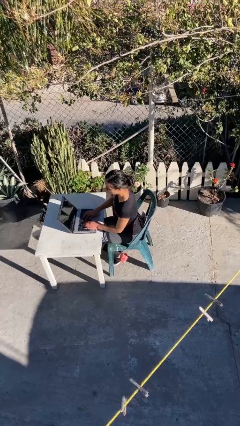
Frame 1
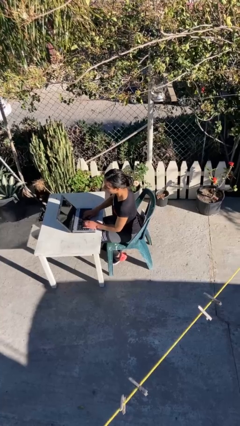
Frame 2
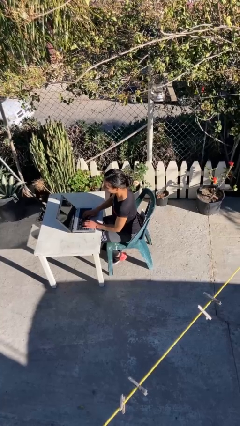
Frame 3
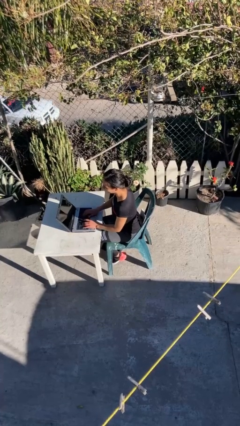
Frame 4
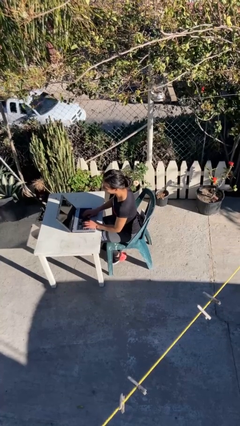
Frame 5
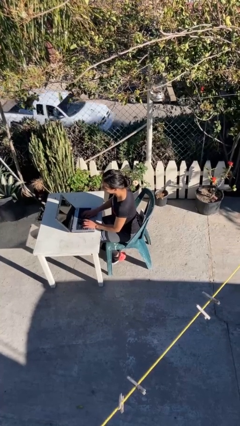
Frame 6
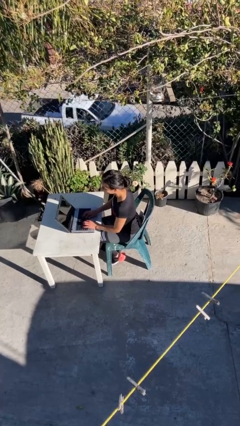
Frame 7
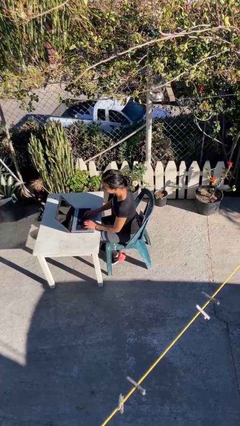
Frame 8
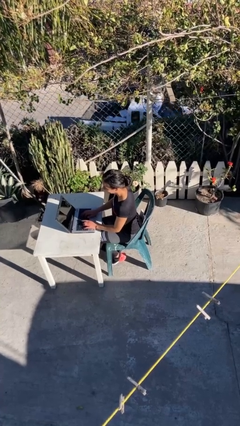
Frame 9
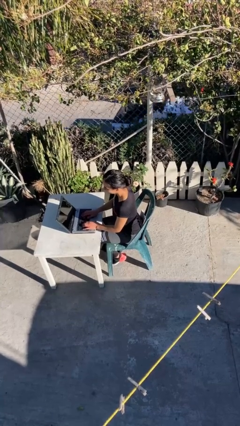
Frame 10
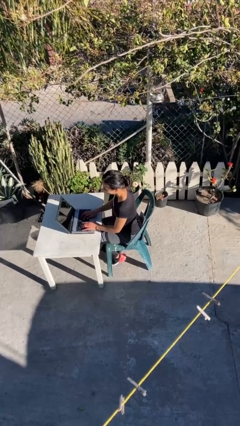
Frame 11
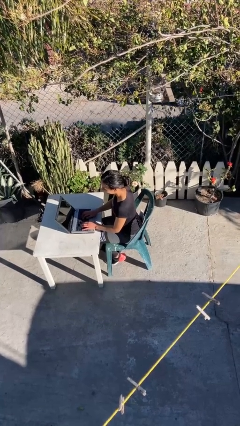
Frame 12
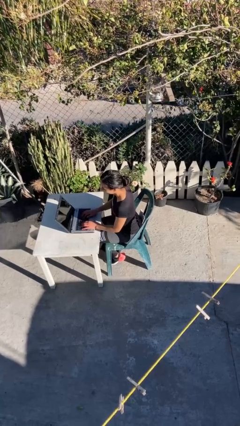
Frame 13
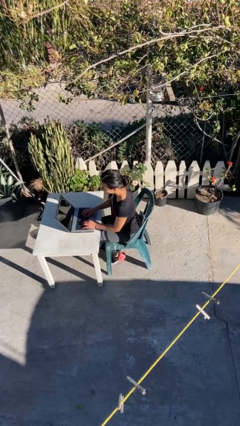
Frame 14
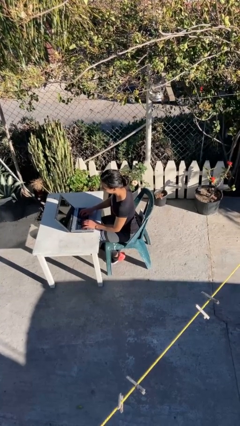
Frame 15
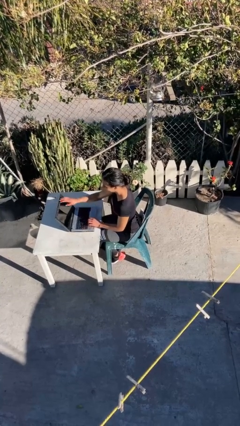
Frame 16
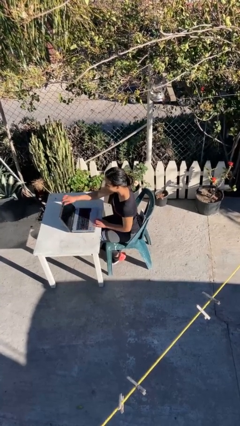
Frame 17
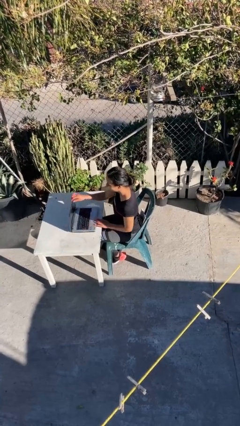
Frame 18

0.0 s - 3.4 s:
person interacts with laptop

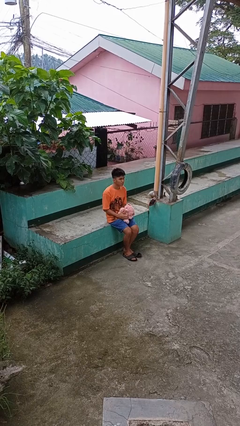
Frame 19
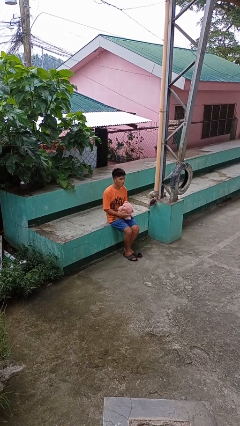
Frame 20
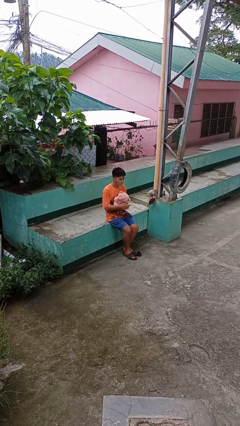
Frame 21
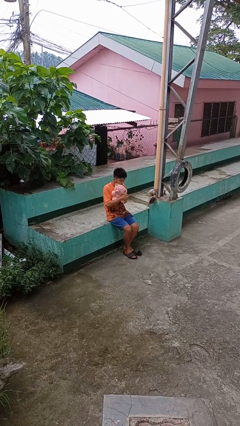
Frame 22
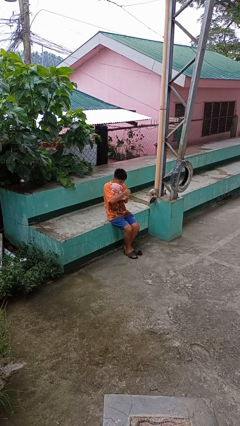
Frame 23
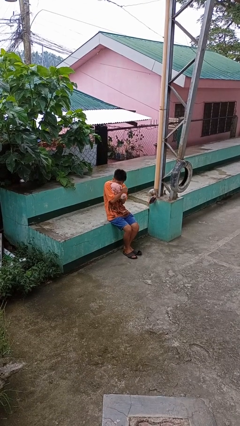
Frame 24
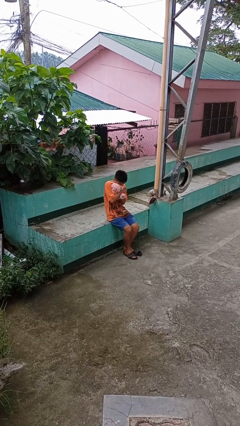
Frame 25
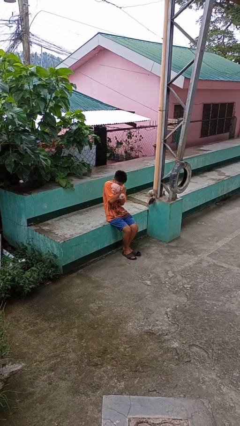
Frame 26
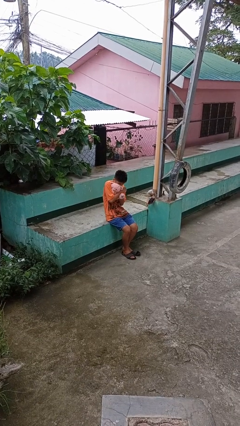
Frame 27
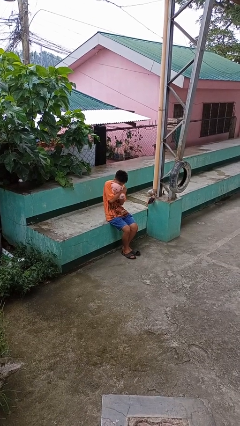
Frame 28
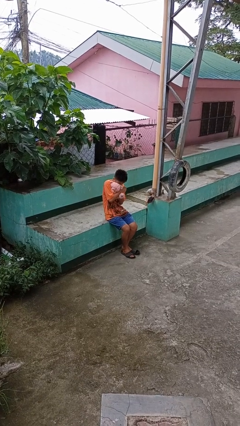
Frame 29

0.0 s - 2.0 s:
person hugs stuffed animal

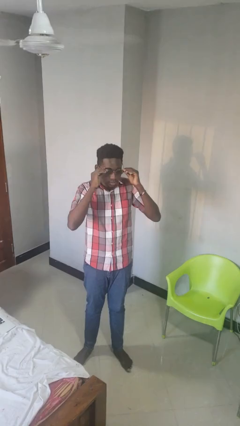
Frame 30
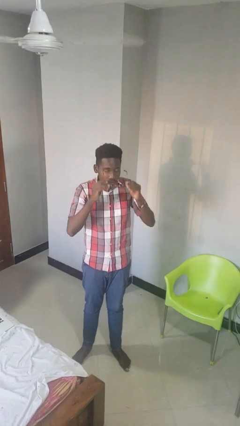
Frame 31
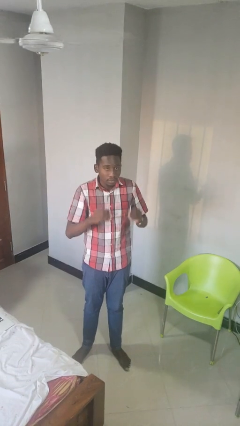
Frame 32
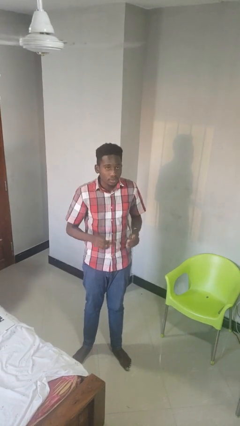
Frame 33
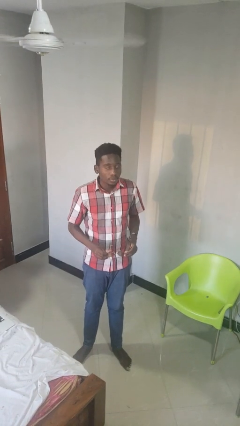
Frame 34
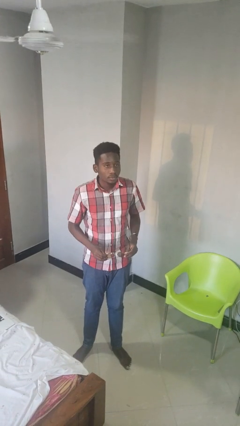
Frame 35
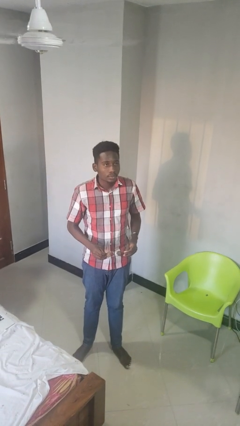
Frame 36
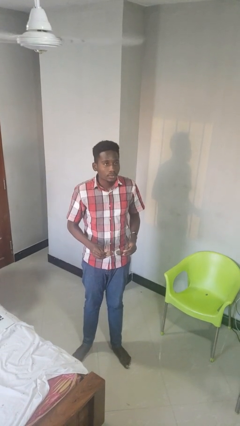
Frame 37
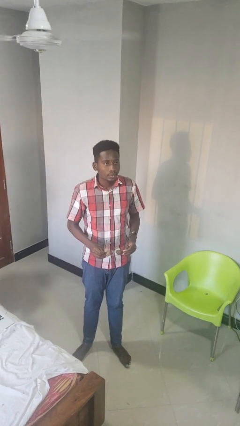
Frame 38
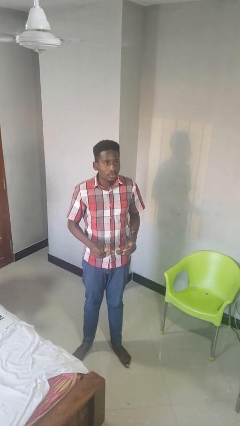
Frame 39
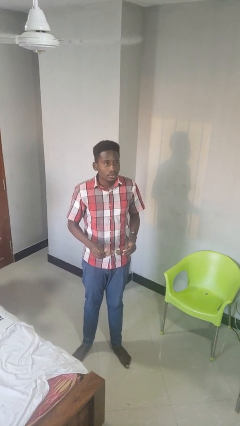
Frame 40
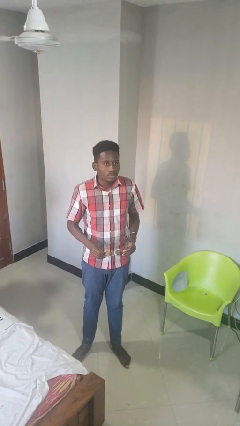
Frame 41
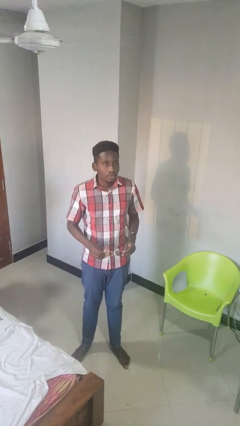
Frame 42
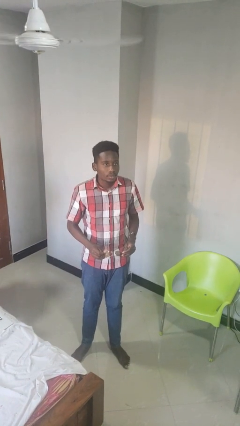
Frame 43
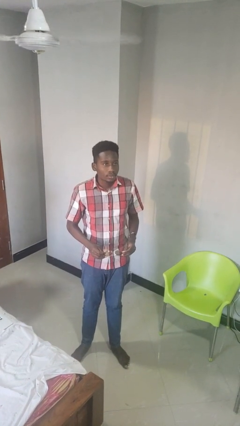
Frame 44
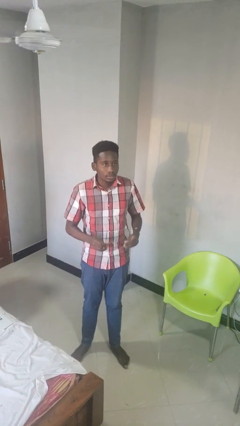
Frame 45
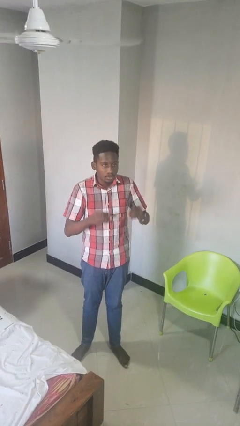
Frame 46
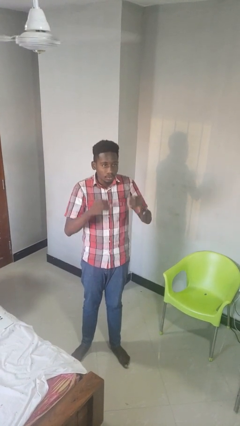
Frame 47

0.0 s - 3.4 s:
person takes off sunglasses

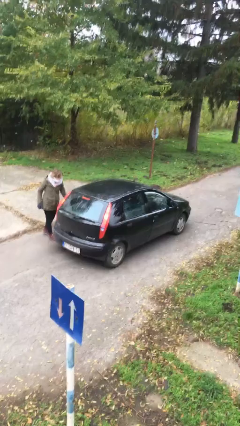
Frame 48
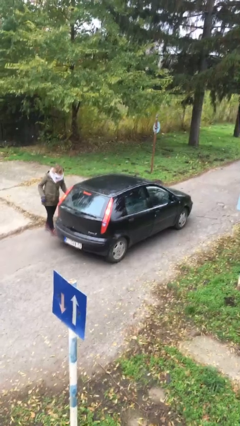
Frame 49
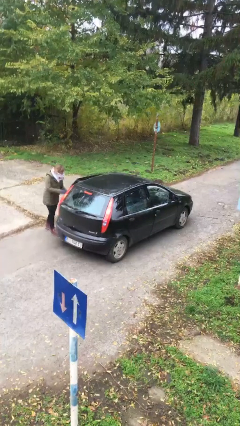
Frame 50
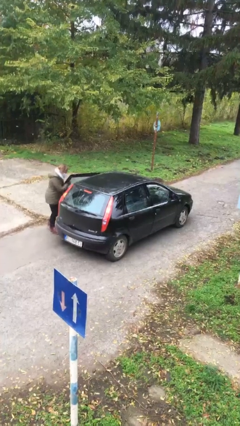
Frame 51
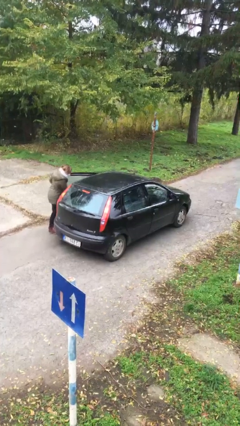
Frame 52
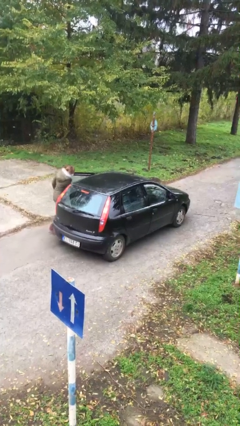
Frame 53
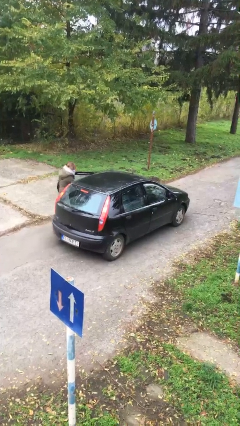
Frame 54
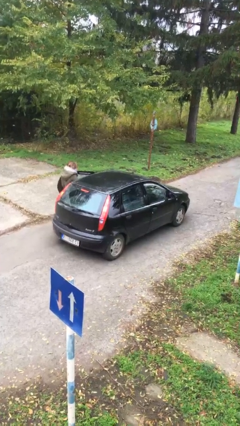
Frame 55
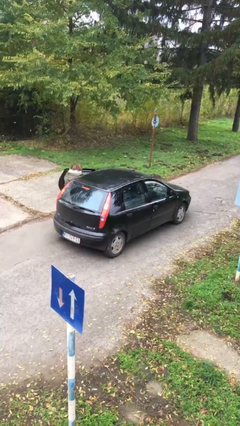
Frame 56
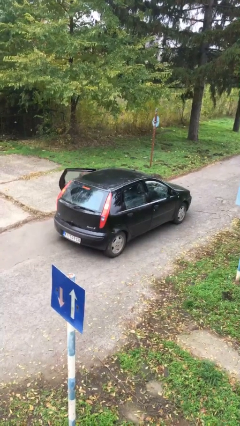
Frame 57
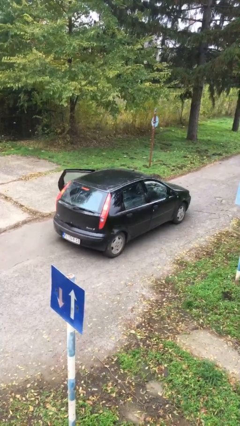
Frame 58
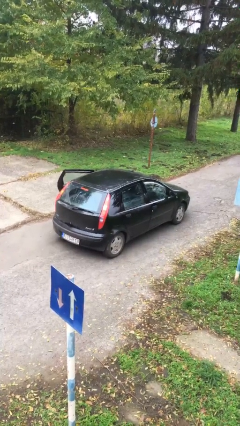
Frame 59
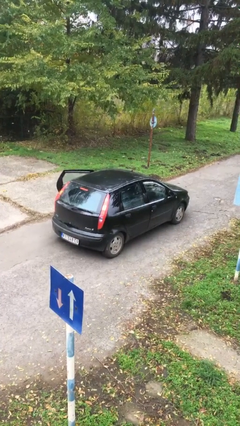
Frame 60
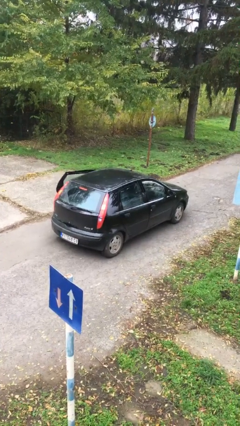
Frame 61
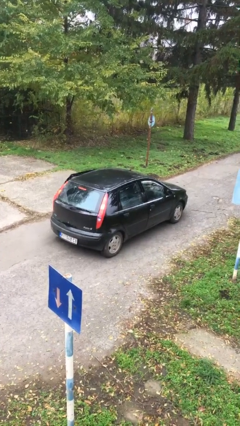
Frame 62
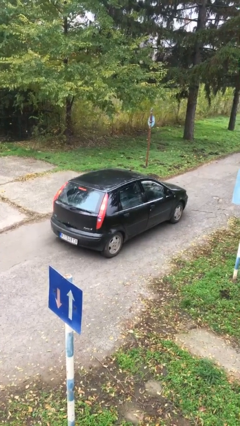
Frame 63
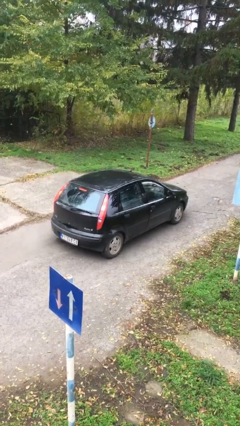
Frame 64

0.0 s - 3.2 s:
car picks up person

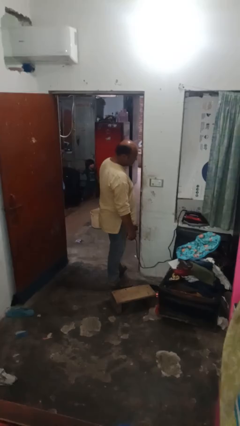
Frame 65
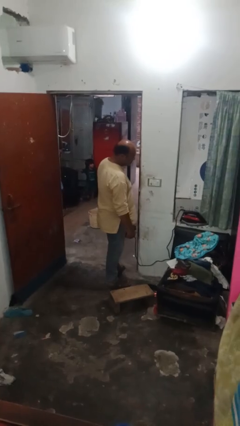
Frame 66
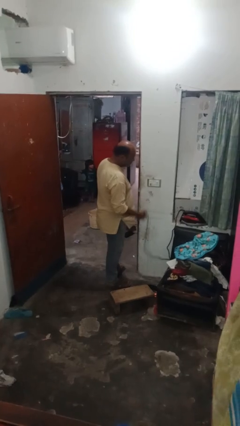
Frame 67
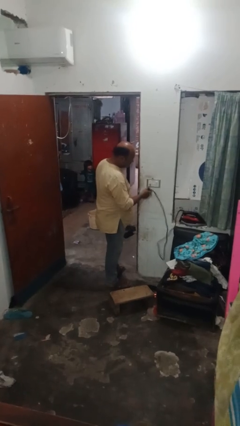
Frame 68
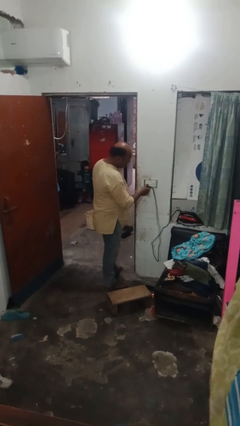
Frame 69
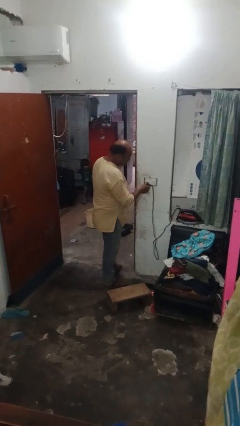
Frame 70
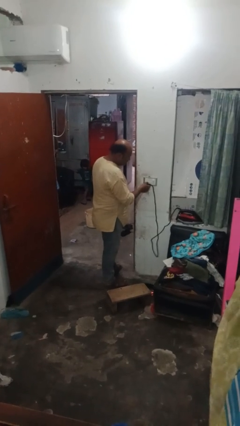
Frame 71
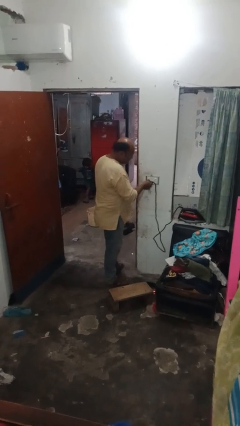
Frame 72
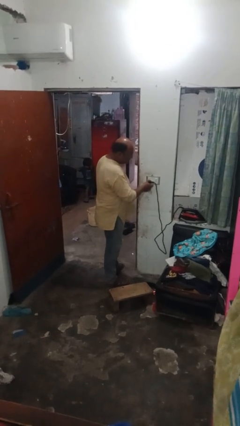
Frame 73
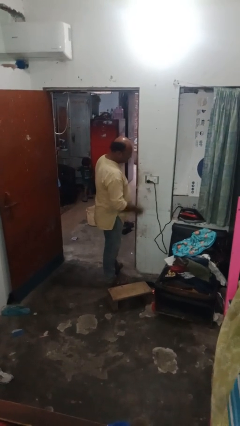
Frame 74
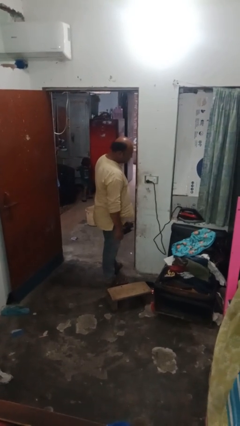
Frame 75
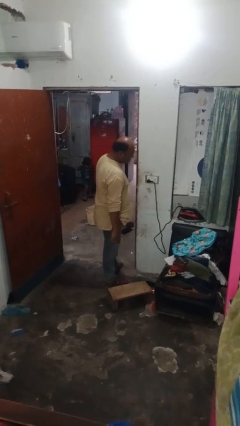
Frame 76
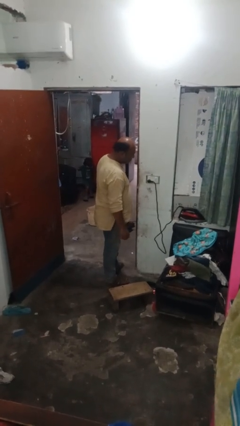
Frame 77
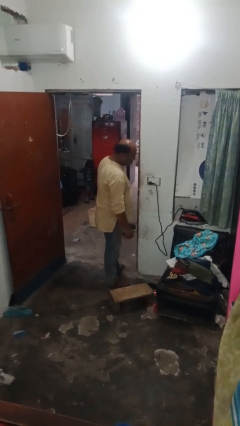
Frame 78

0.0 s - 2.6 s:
person plugs into electrical socket

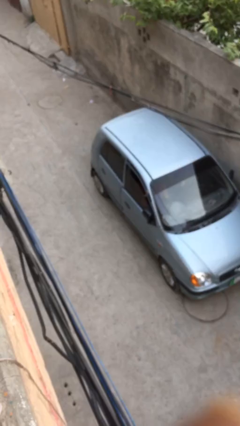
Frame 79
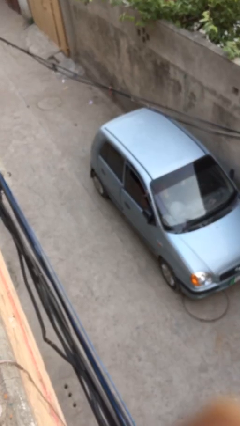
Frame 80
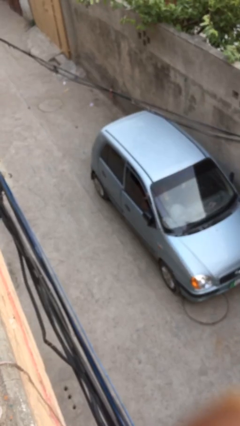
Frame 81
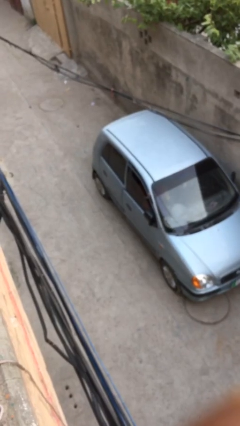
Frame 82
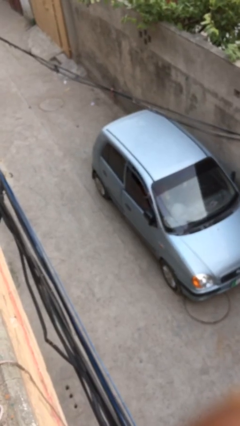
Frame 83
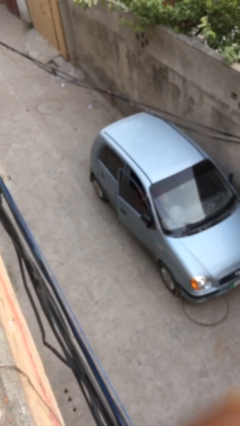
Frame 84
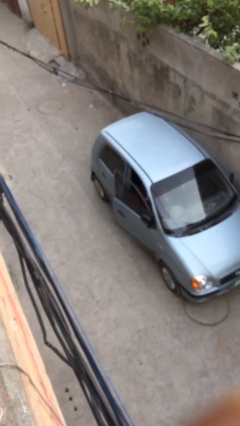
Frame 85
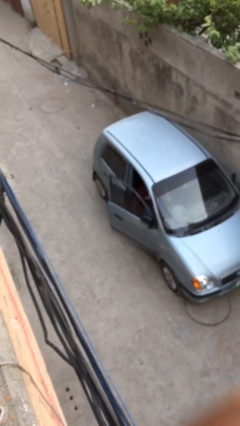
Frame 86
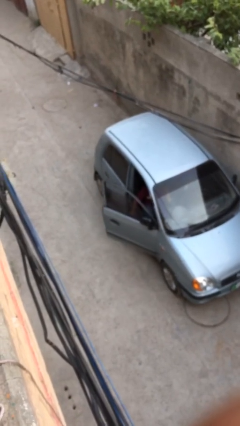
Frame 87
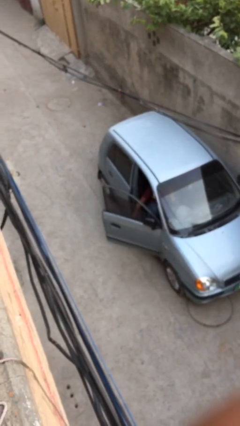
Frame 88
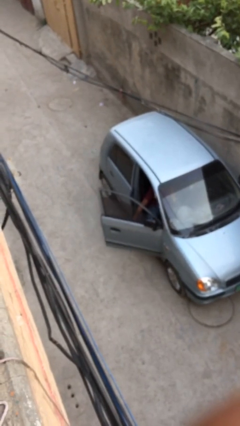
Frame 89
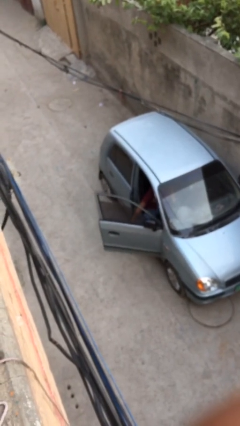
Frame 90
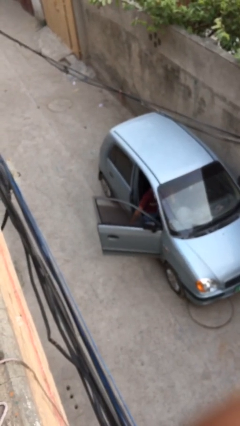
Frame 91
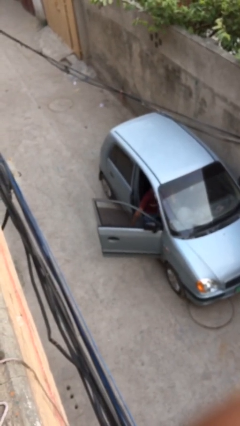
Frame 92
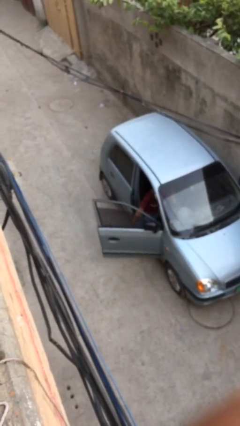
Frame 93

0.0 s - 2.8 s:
person opens car door

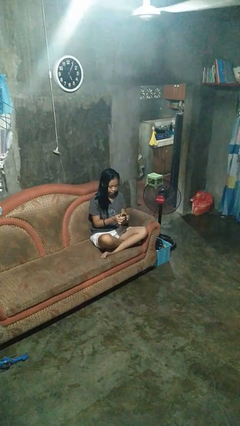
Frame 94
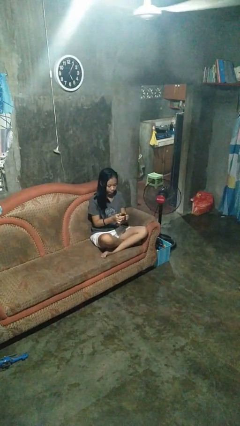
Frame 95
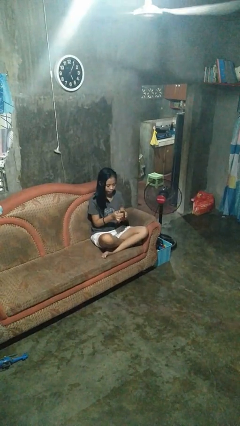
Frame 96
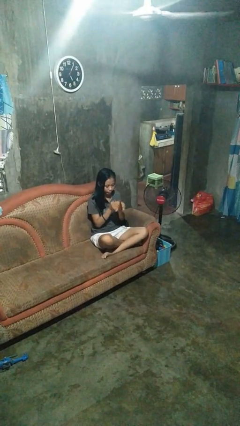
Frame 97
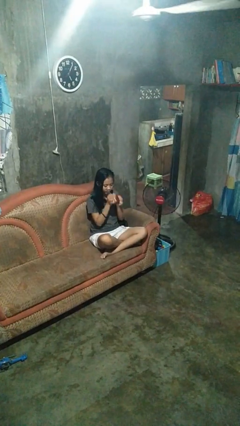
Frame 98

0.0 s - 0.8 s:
person drinks from mug
